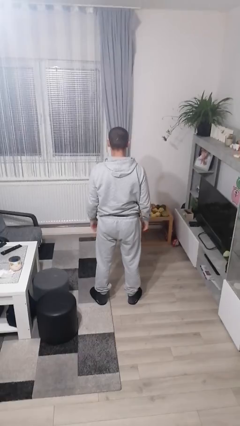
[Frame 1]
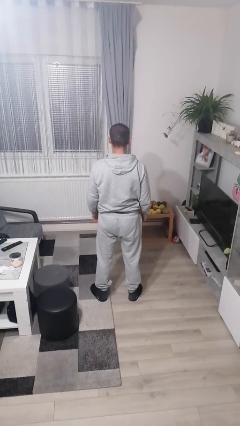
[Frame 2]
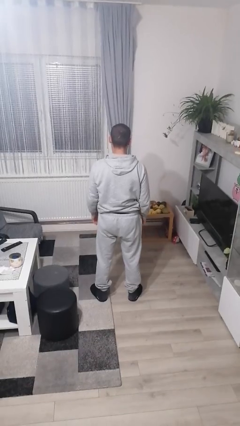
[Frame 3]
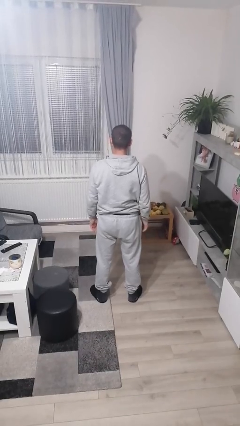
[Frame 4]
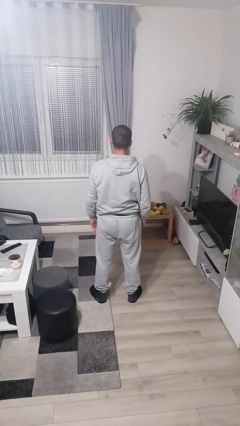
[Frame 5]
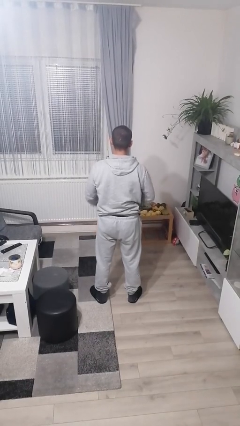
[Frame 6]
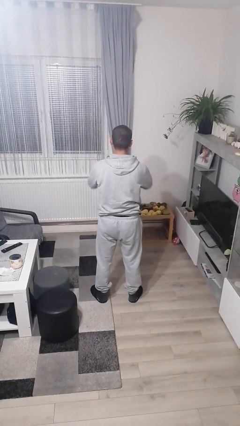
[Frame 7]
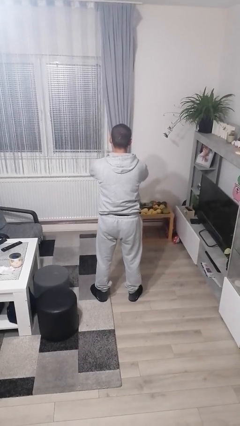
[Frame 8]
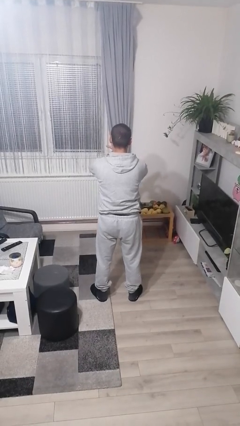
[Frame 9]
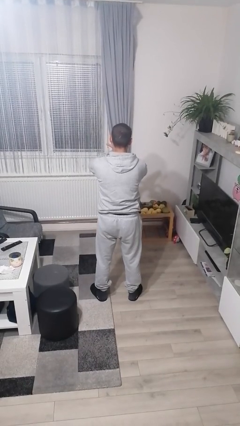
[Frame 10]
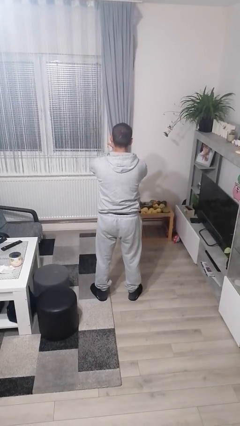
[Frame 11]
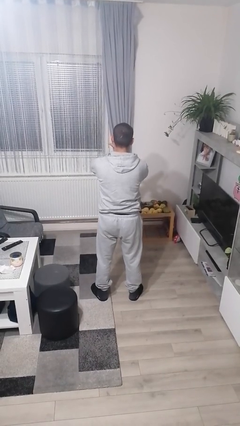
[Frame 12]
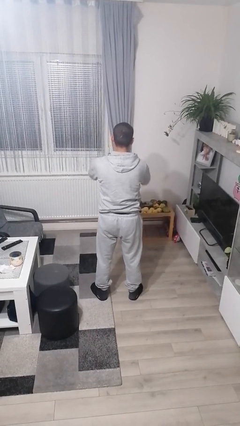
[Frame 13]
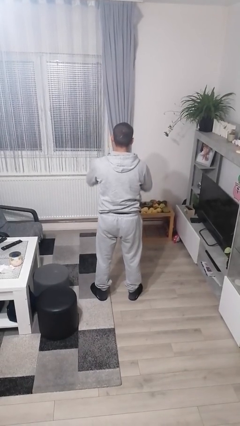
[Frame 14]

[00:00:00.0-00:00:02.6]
person gestures arms x

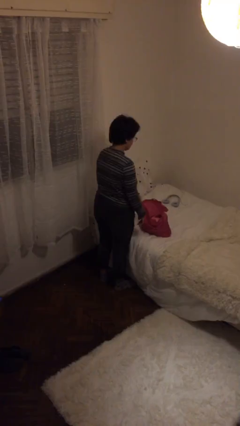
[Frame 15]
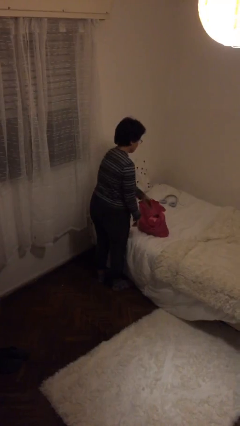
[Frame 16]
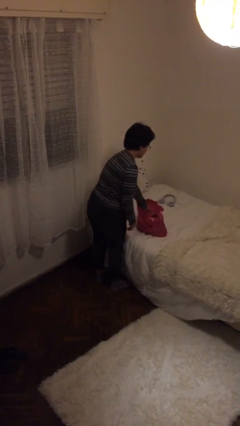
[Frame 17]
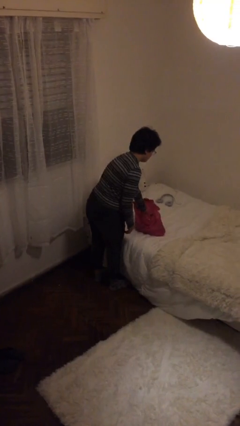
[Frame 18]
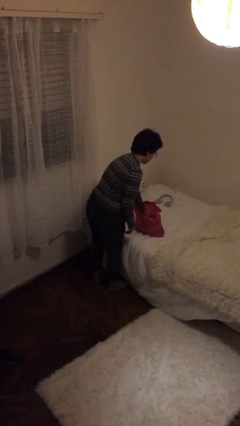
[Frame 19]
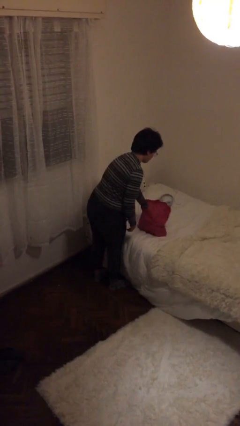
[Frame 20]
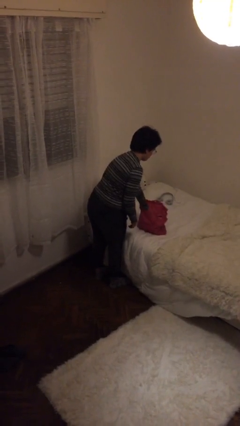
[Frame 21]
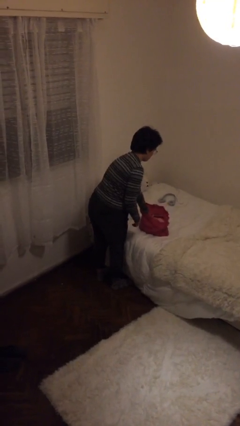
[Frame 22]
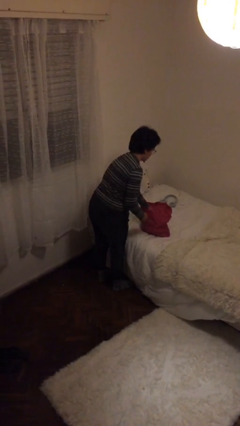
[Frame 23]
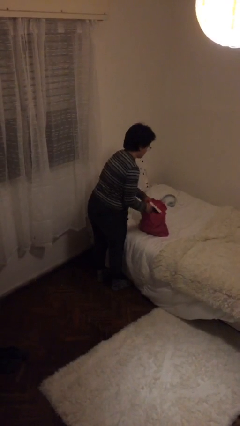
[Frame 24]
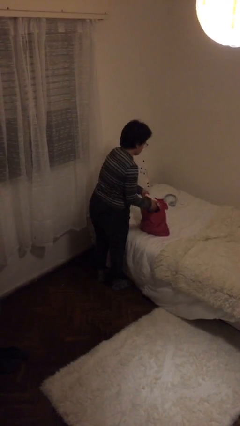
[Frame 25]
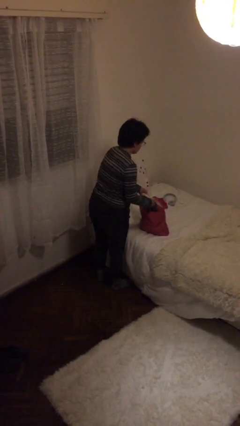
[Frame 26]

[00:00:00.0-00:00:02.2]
person takes object from bag

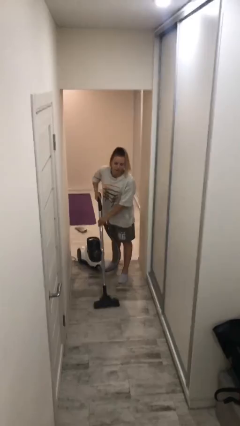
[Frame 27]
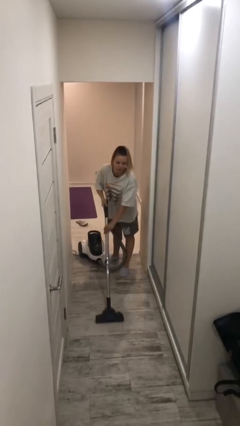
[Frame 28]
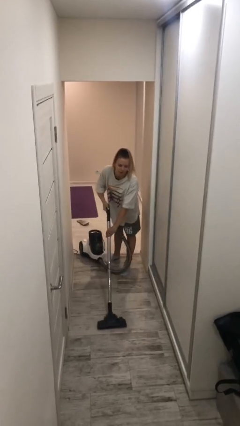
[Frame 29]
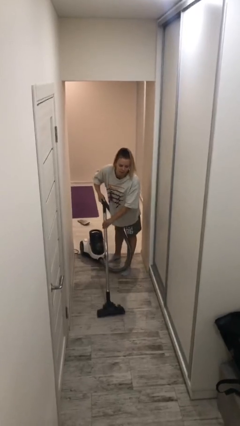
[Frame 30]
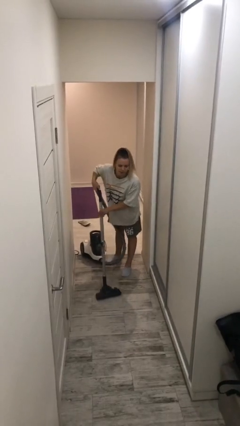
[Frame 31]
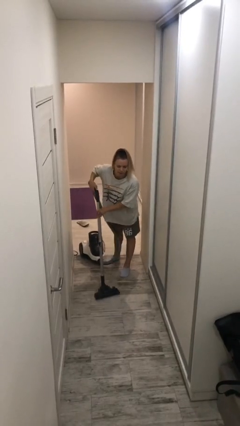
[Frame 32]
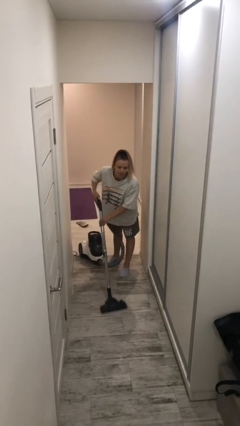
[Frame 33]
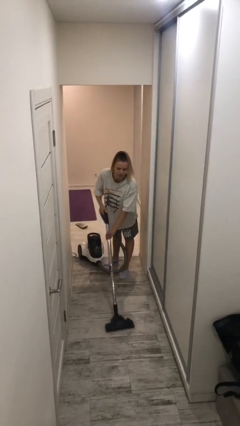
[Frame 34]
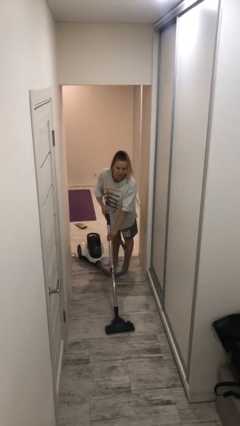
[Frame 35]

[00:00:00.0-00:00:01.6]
person vacuums carpet

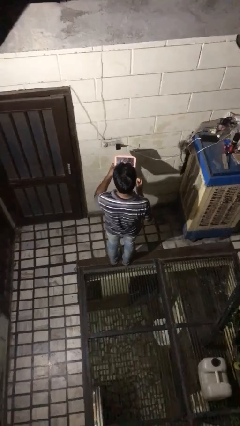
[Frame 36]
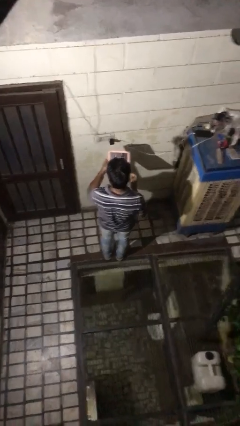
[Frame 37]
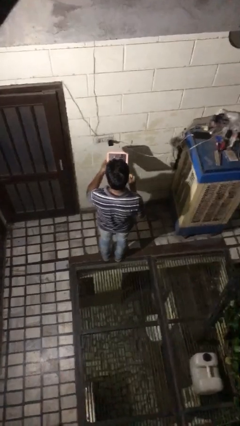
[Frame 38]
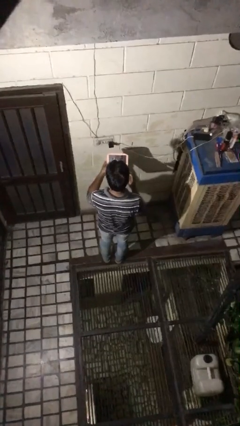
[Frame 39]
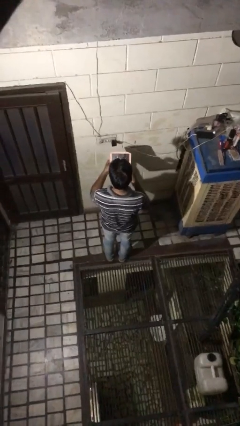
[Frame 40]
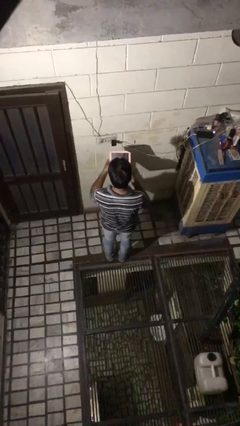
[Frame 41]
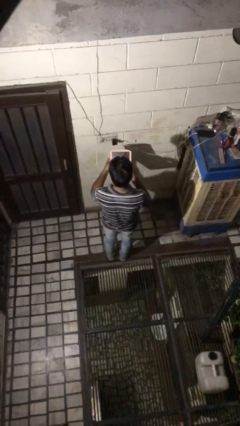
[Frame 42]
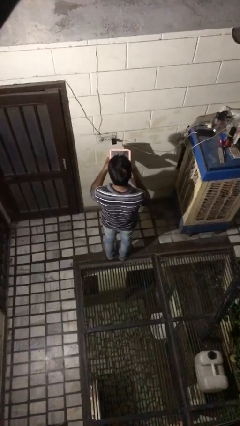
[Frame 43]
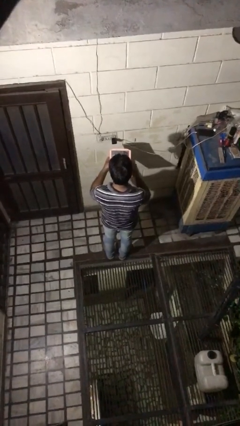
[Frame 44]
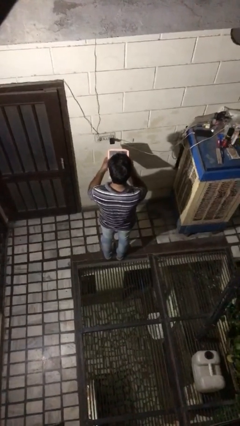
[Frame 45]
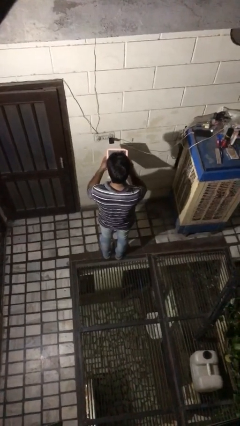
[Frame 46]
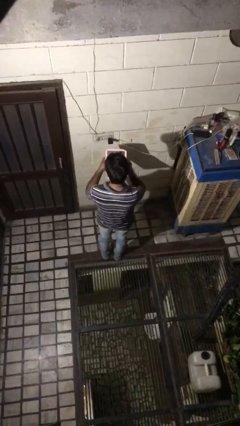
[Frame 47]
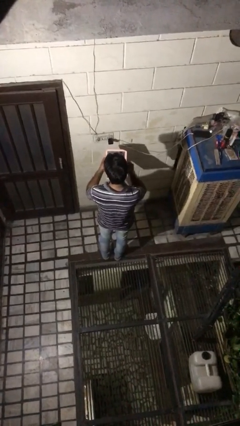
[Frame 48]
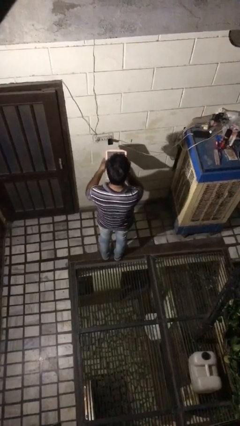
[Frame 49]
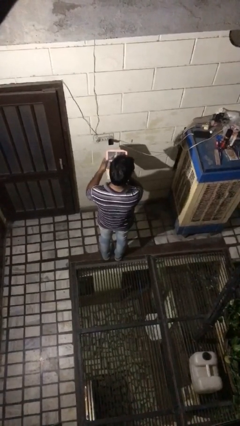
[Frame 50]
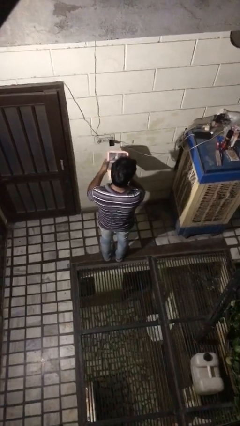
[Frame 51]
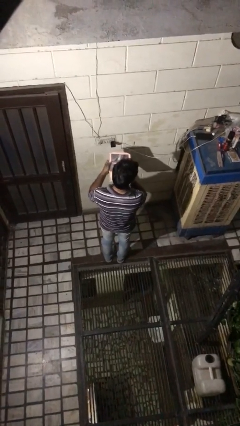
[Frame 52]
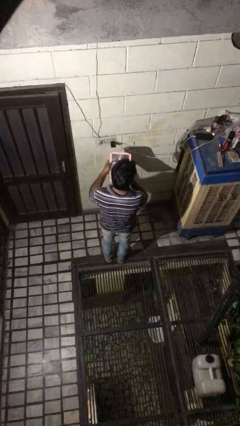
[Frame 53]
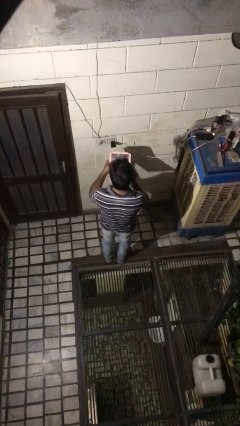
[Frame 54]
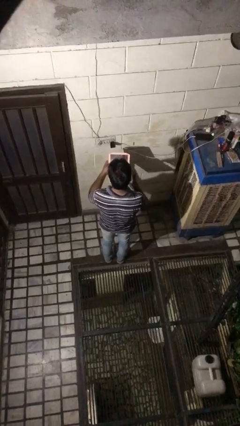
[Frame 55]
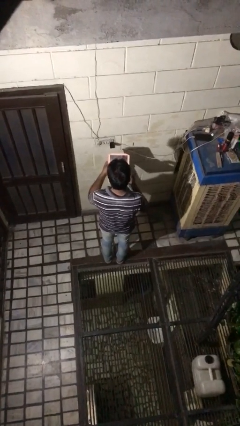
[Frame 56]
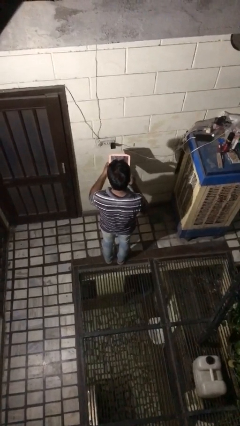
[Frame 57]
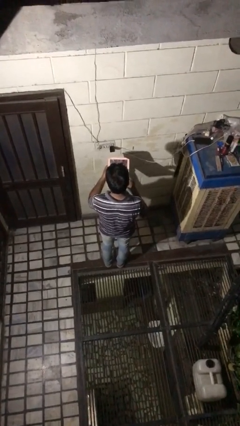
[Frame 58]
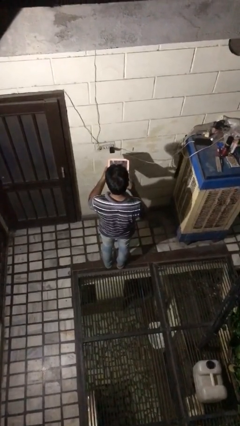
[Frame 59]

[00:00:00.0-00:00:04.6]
person applies foundation makeup

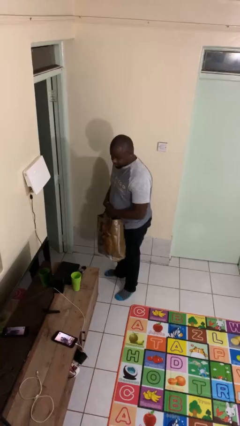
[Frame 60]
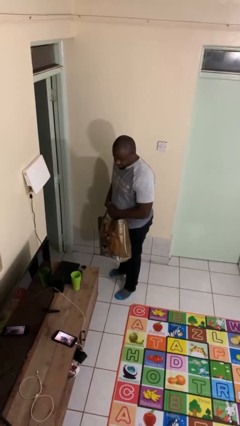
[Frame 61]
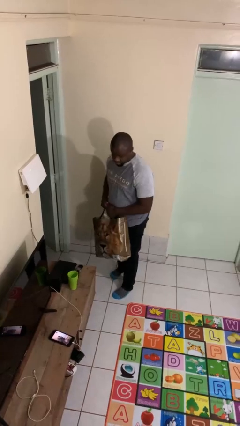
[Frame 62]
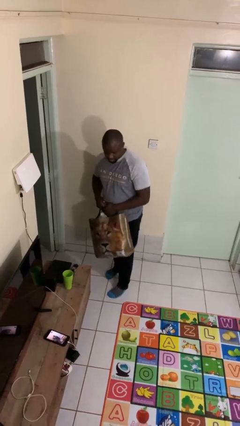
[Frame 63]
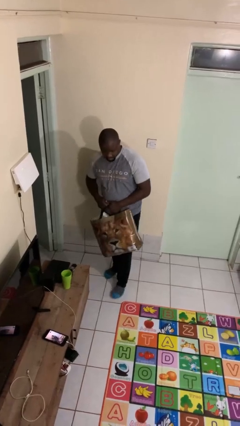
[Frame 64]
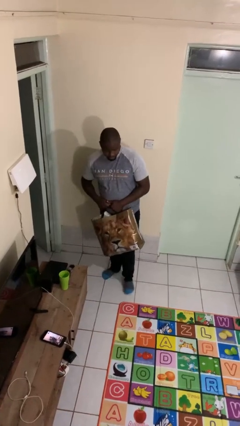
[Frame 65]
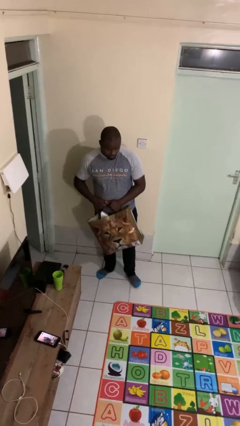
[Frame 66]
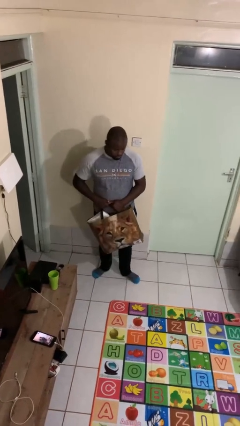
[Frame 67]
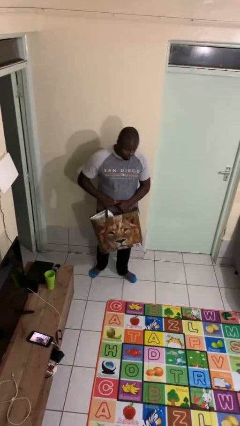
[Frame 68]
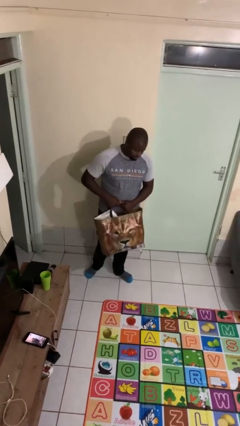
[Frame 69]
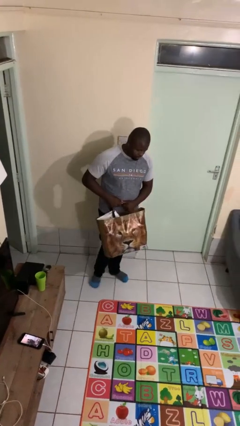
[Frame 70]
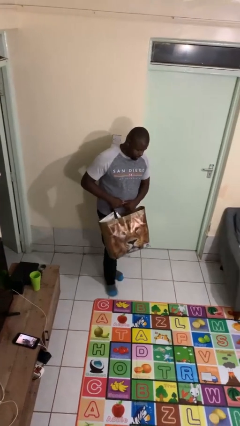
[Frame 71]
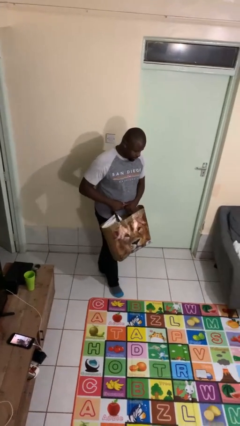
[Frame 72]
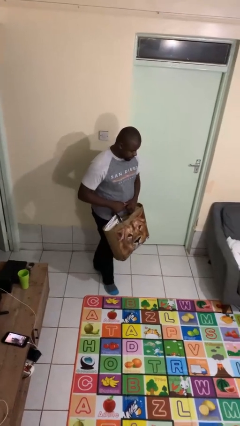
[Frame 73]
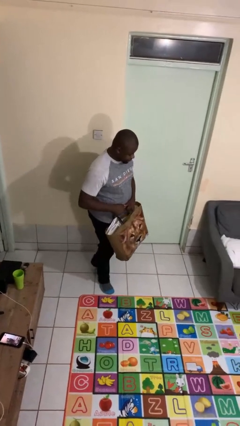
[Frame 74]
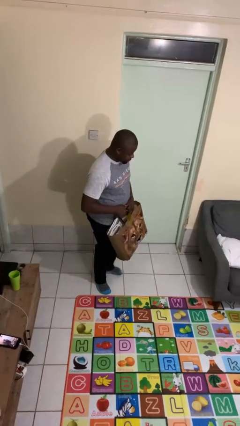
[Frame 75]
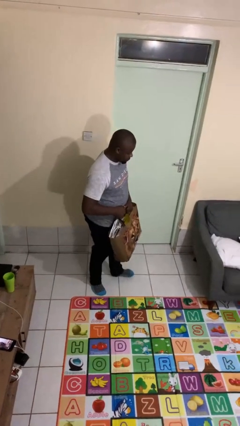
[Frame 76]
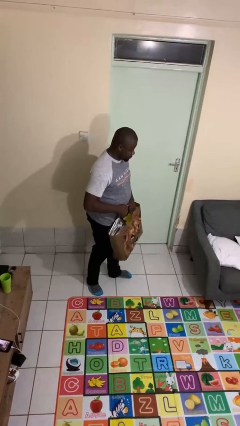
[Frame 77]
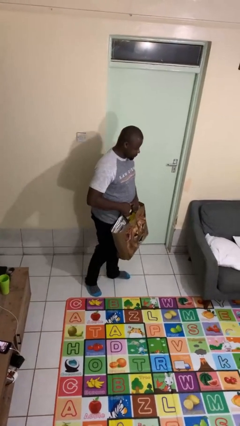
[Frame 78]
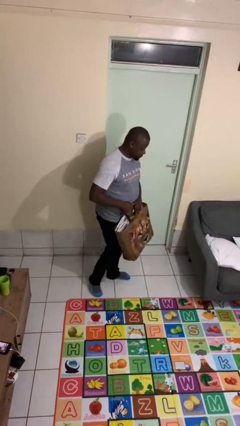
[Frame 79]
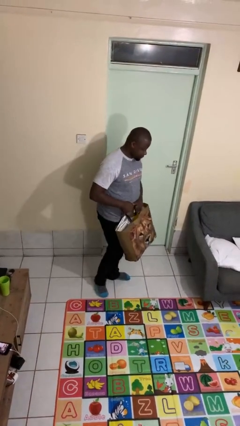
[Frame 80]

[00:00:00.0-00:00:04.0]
person carries groceries

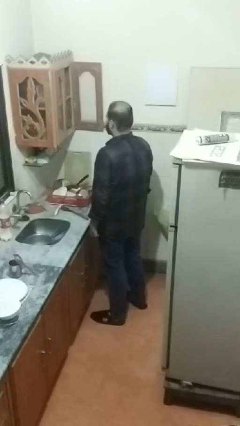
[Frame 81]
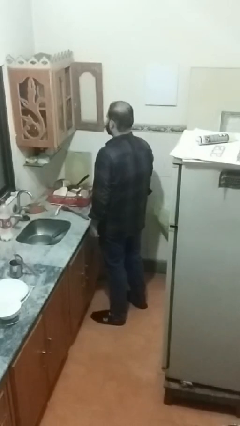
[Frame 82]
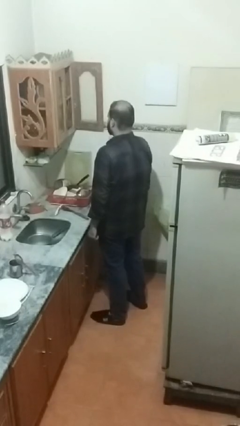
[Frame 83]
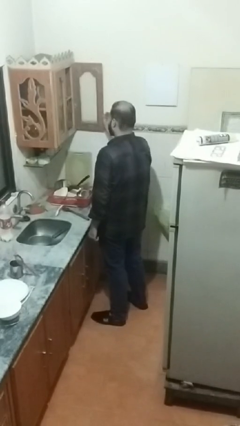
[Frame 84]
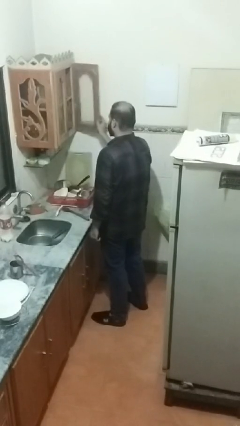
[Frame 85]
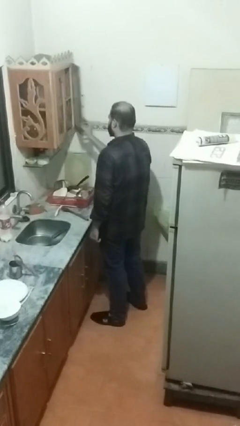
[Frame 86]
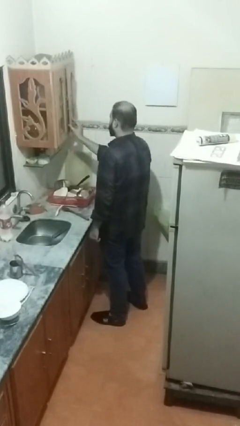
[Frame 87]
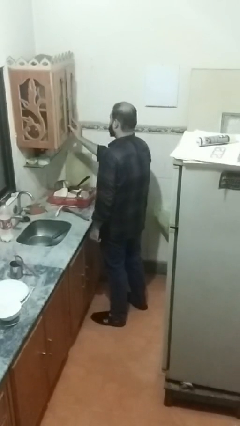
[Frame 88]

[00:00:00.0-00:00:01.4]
person closes kitchen drawer

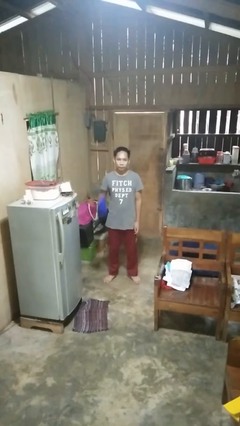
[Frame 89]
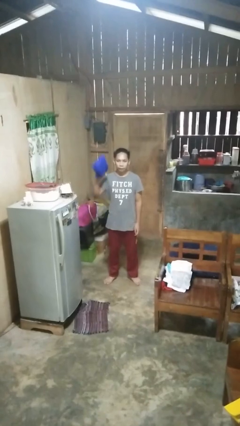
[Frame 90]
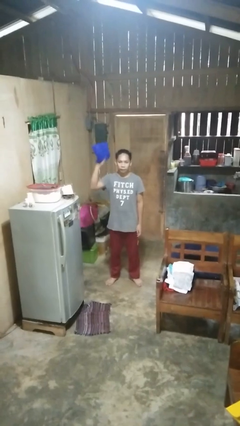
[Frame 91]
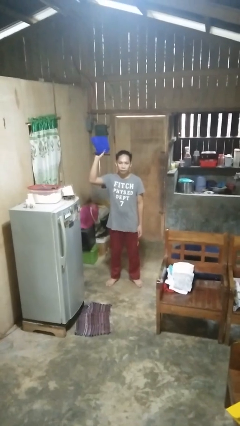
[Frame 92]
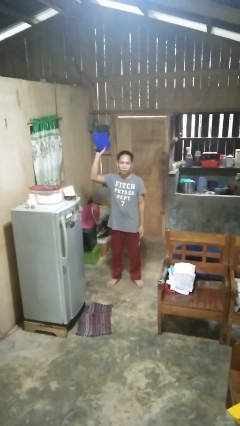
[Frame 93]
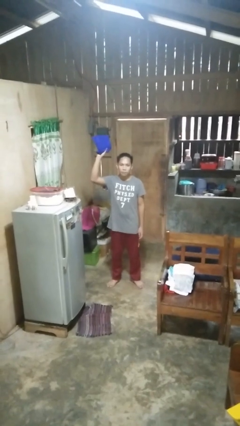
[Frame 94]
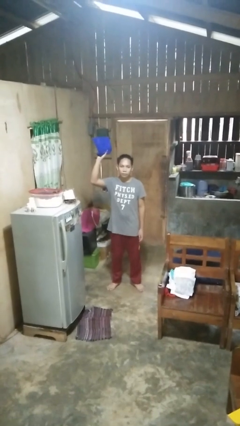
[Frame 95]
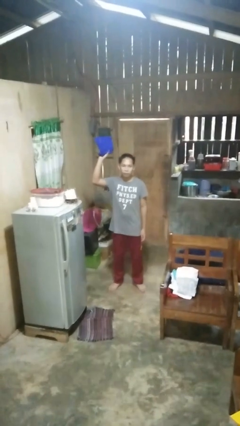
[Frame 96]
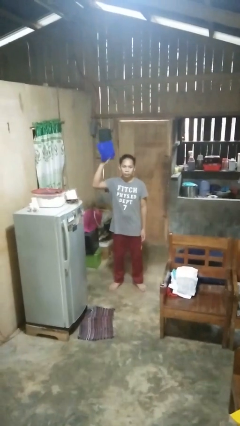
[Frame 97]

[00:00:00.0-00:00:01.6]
person holds object above head
